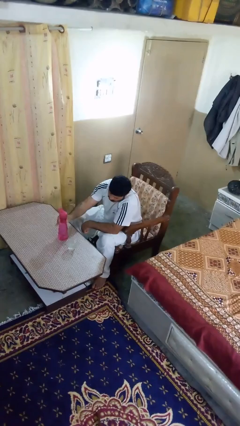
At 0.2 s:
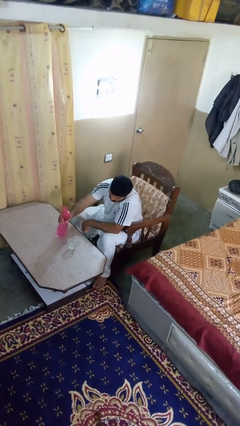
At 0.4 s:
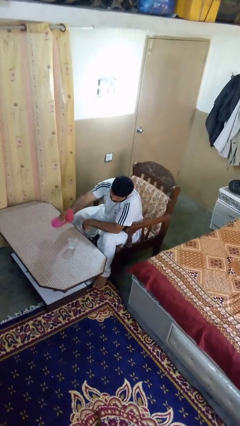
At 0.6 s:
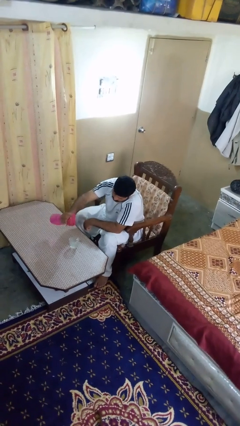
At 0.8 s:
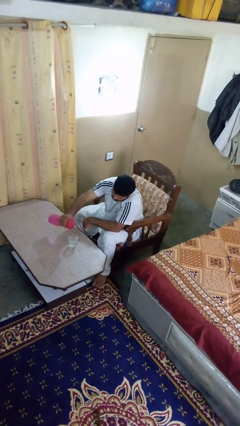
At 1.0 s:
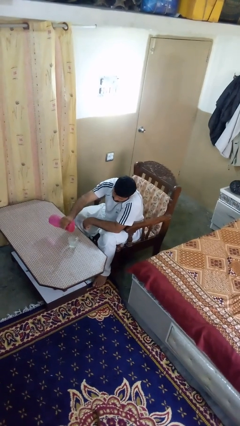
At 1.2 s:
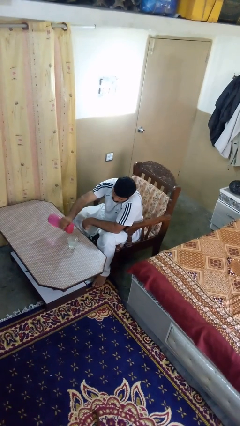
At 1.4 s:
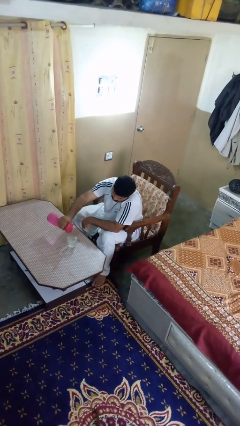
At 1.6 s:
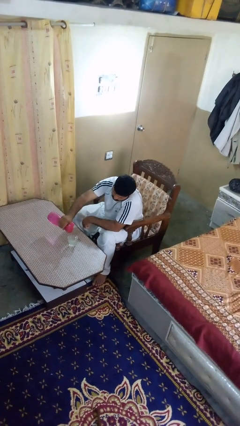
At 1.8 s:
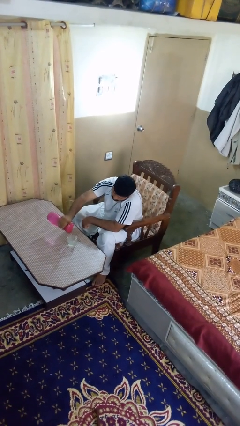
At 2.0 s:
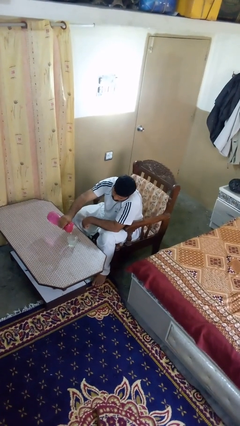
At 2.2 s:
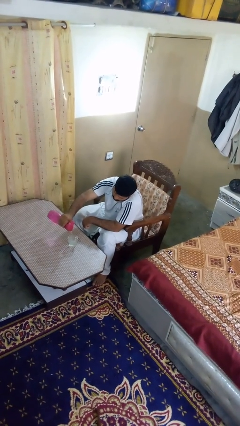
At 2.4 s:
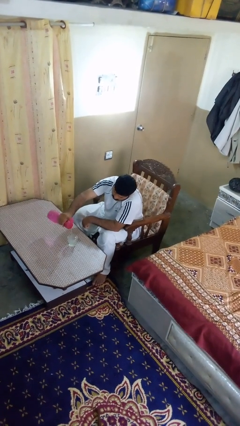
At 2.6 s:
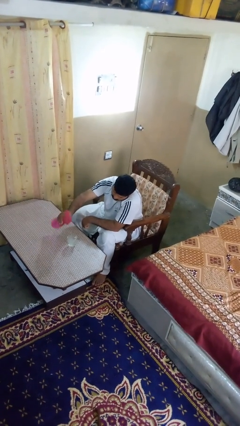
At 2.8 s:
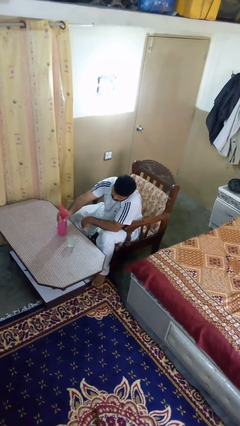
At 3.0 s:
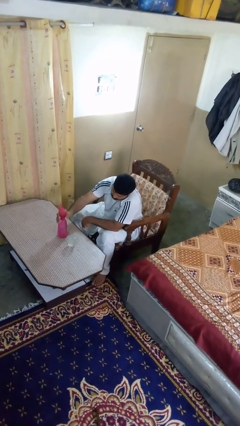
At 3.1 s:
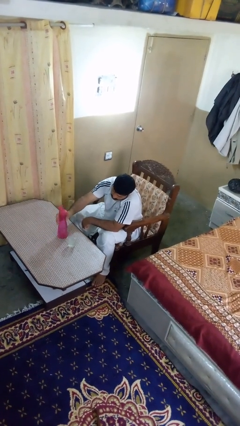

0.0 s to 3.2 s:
person pours liquid into cup

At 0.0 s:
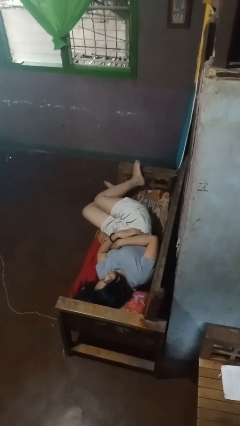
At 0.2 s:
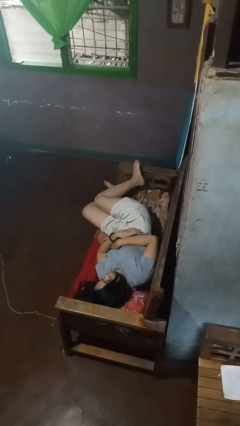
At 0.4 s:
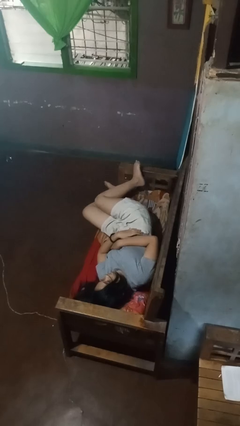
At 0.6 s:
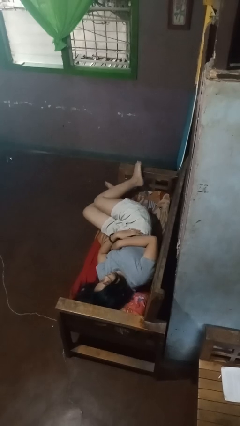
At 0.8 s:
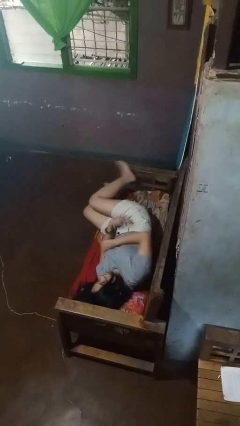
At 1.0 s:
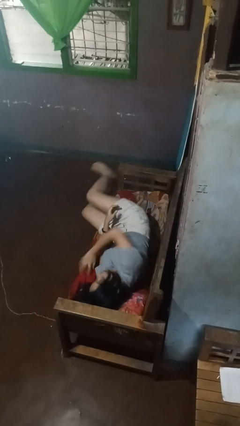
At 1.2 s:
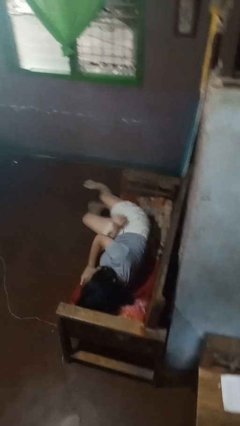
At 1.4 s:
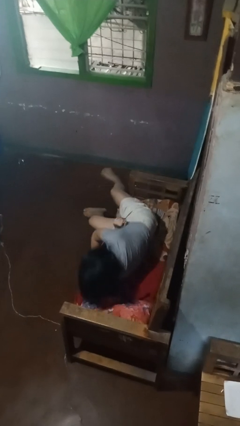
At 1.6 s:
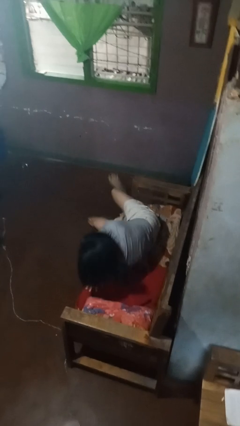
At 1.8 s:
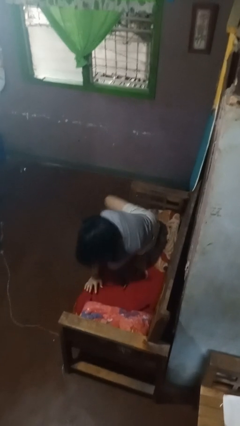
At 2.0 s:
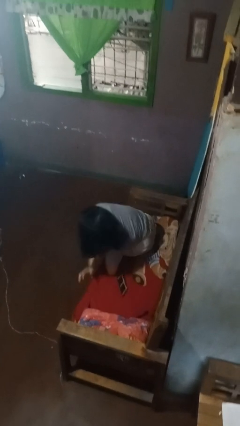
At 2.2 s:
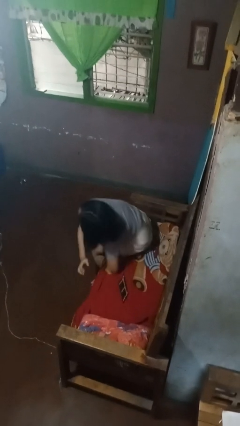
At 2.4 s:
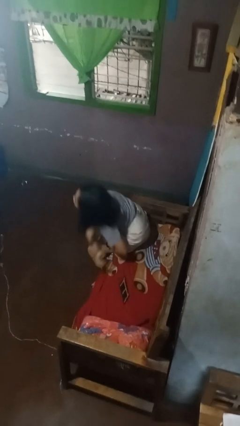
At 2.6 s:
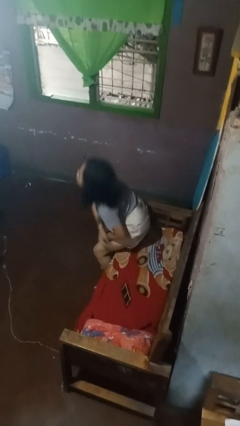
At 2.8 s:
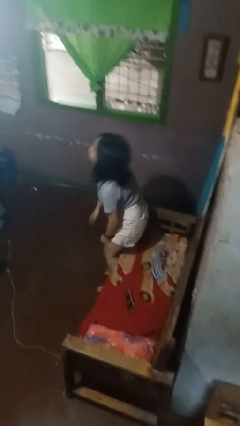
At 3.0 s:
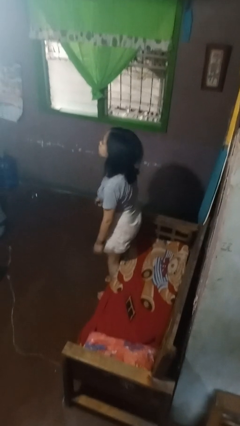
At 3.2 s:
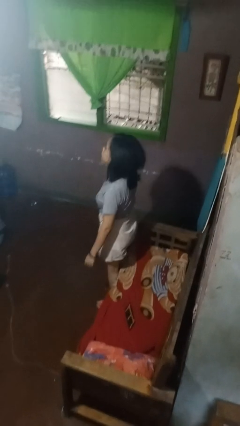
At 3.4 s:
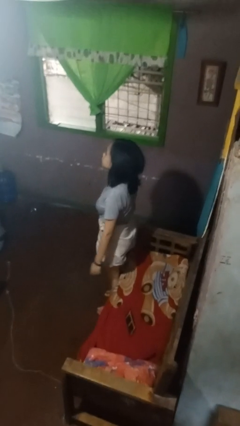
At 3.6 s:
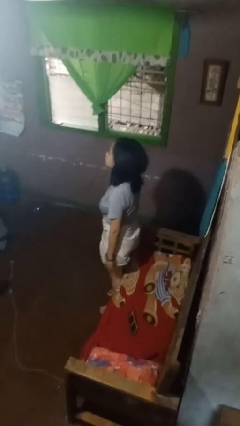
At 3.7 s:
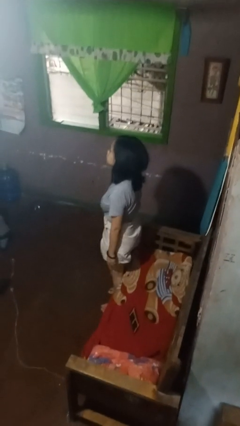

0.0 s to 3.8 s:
person stands up

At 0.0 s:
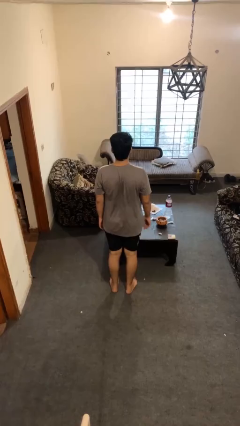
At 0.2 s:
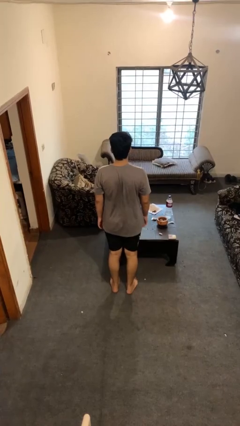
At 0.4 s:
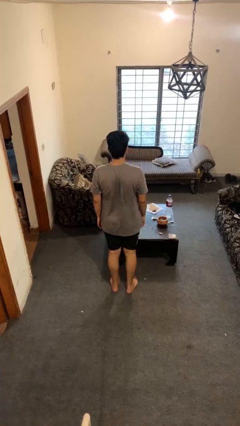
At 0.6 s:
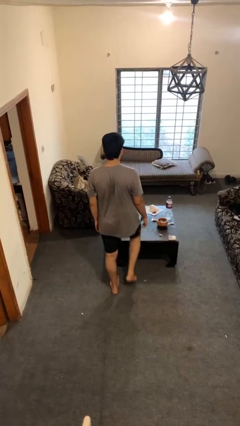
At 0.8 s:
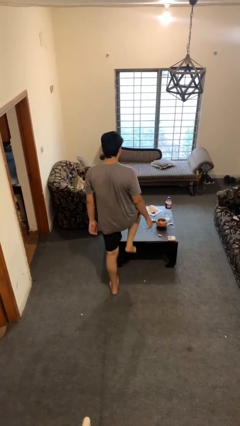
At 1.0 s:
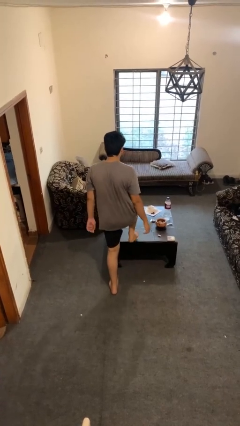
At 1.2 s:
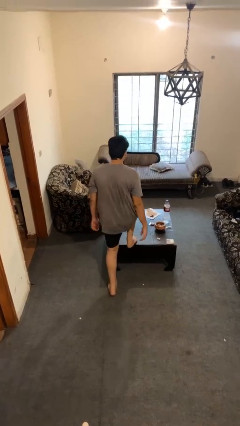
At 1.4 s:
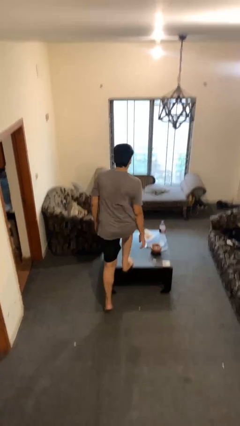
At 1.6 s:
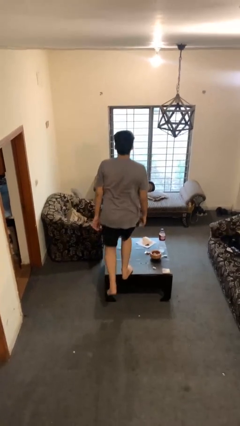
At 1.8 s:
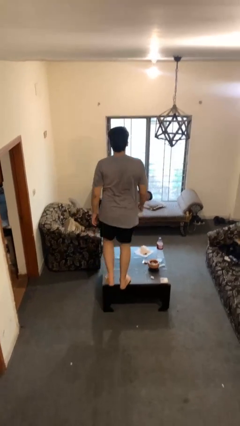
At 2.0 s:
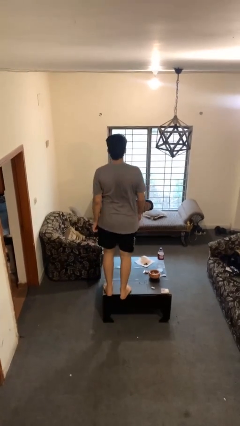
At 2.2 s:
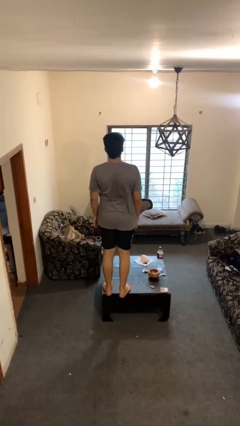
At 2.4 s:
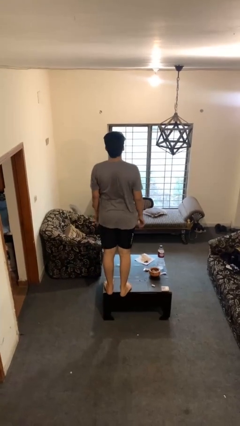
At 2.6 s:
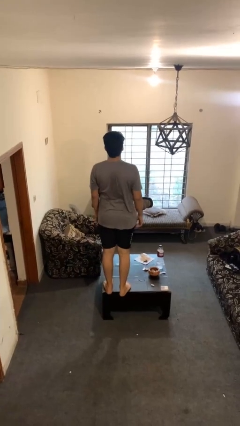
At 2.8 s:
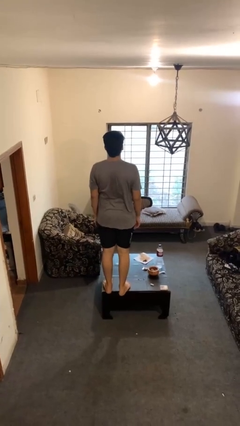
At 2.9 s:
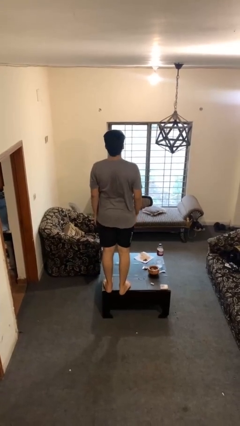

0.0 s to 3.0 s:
person climbs on table

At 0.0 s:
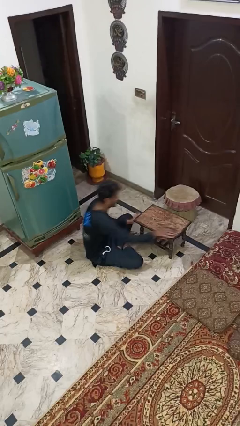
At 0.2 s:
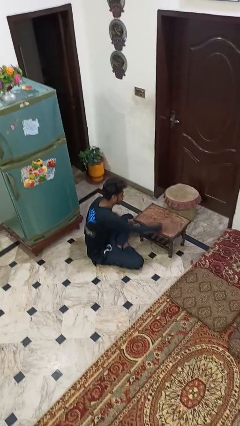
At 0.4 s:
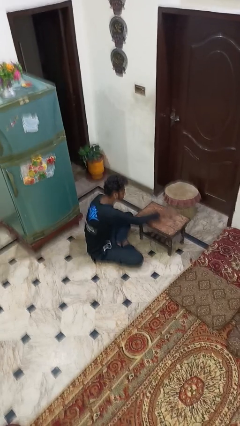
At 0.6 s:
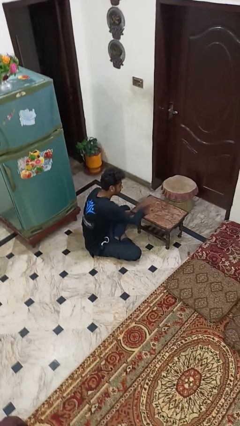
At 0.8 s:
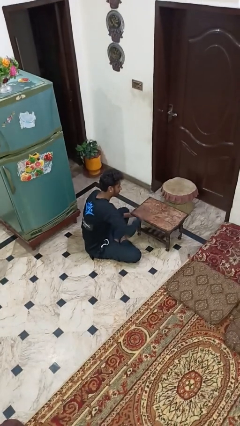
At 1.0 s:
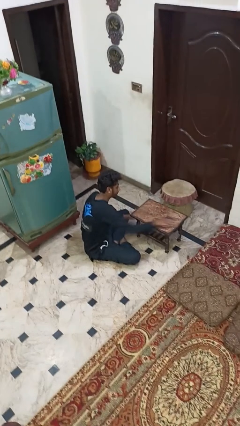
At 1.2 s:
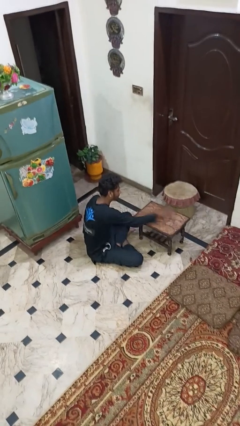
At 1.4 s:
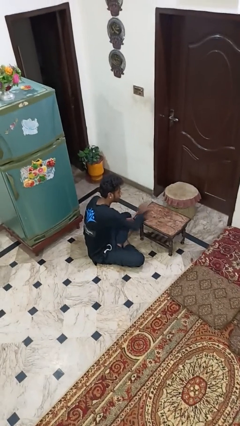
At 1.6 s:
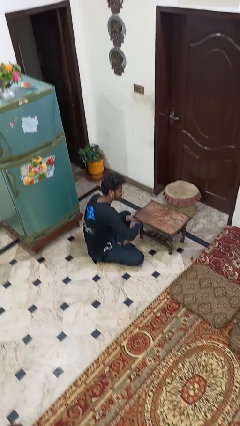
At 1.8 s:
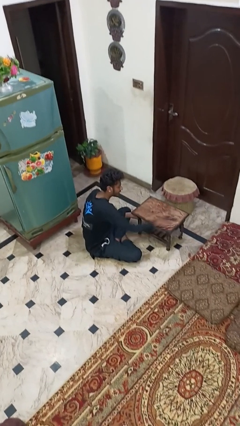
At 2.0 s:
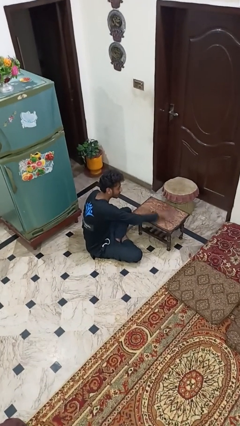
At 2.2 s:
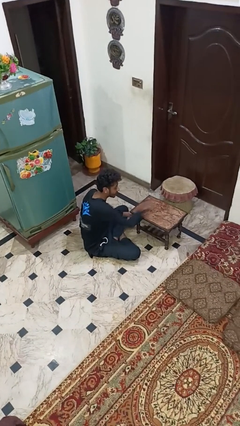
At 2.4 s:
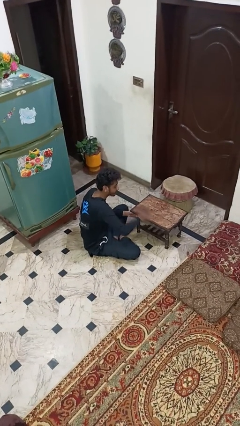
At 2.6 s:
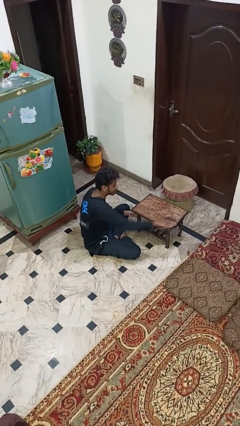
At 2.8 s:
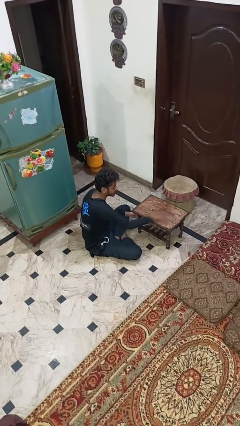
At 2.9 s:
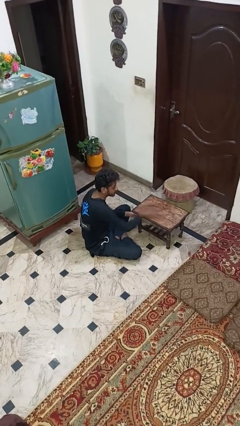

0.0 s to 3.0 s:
person cleans table with rag

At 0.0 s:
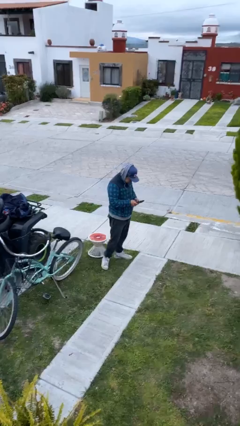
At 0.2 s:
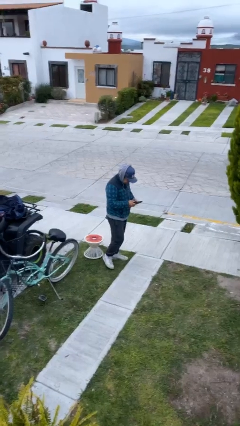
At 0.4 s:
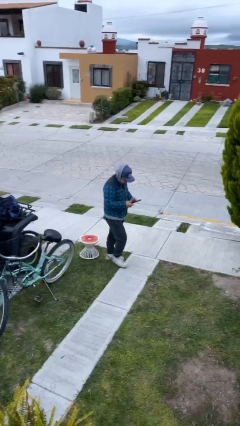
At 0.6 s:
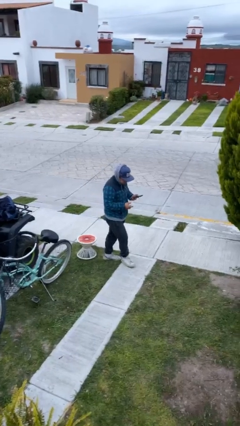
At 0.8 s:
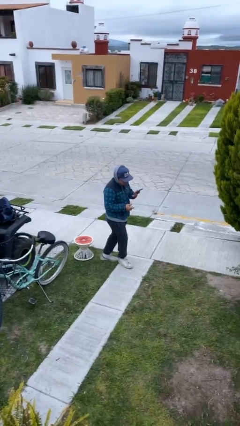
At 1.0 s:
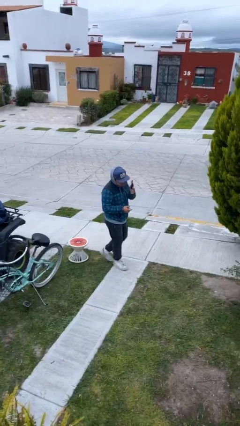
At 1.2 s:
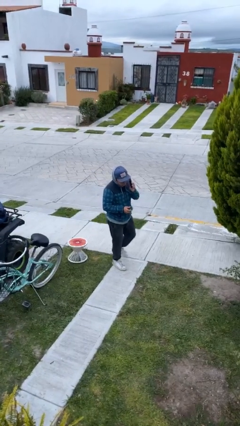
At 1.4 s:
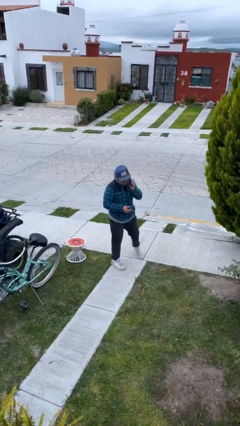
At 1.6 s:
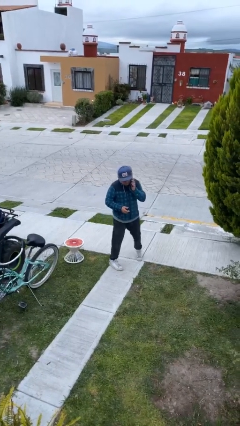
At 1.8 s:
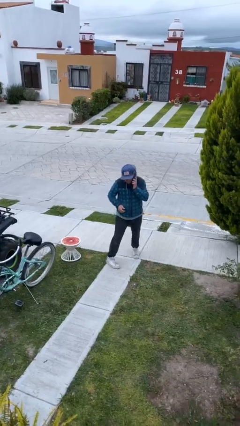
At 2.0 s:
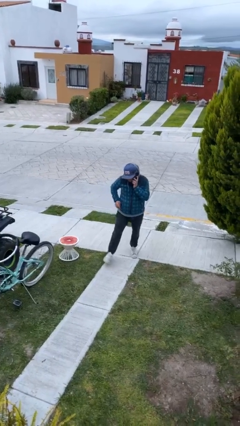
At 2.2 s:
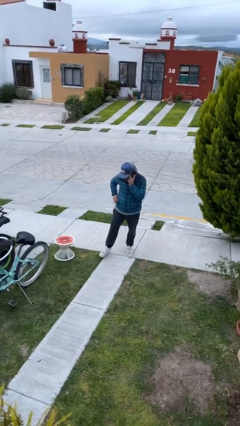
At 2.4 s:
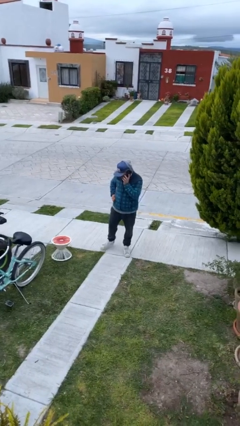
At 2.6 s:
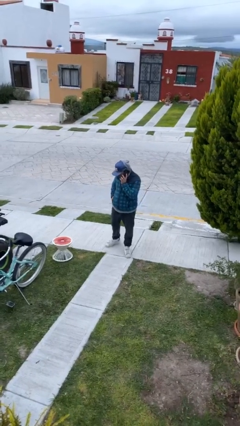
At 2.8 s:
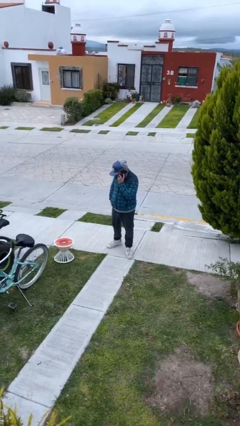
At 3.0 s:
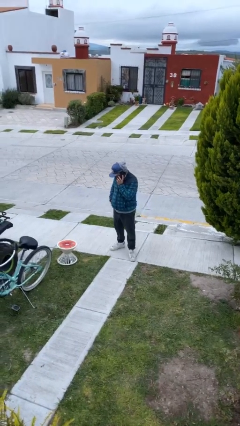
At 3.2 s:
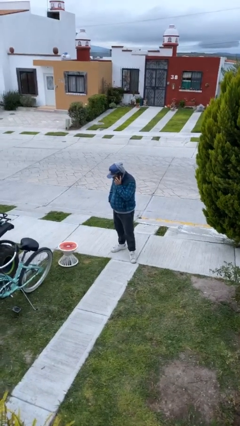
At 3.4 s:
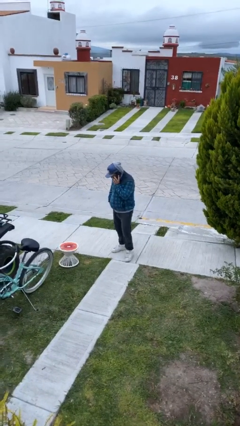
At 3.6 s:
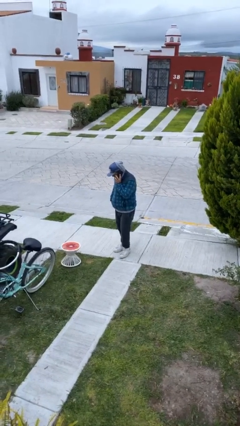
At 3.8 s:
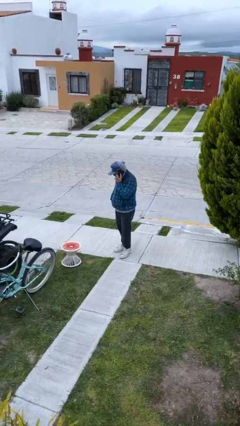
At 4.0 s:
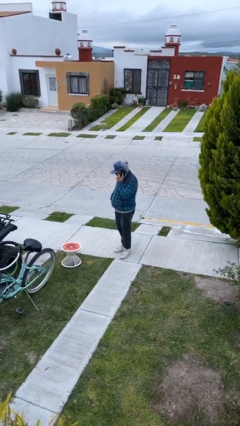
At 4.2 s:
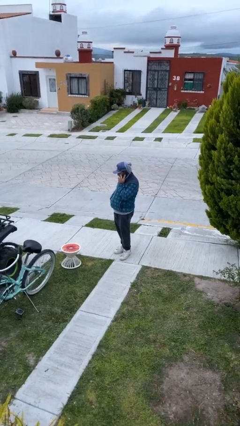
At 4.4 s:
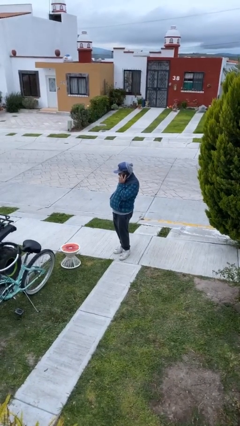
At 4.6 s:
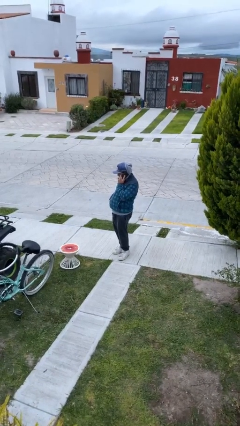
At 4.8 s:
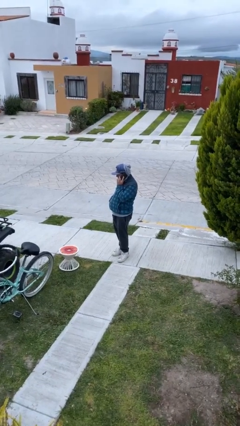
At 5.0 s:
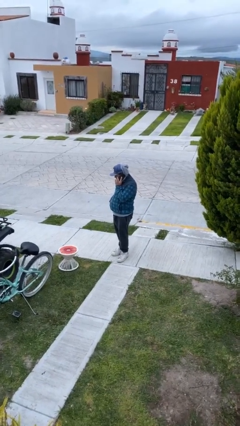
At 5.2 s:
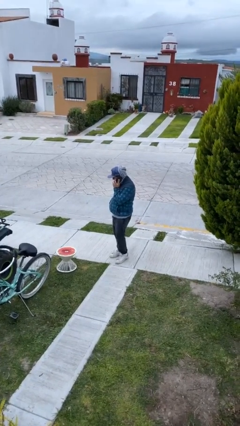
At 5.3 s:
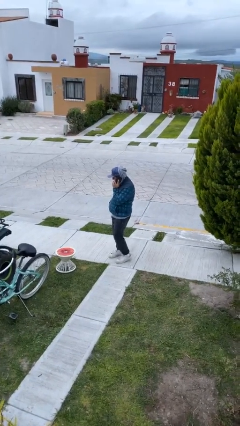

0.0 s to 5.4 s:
person talks on phone
